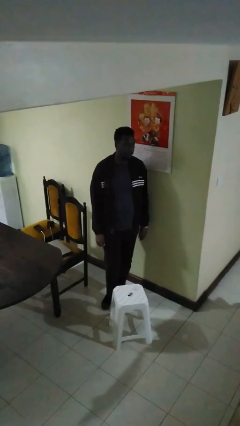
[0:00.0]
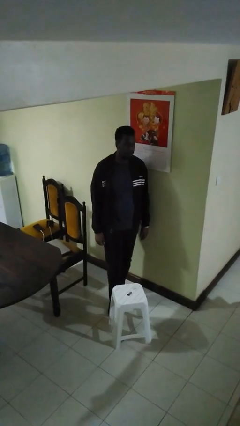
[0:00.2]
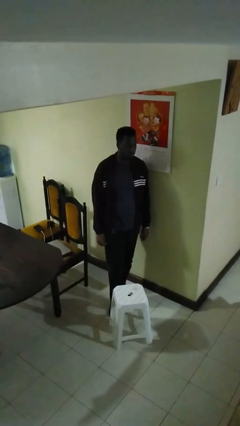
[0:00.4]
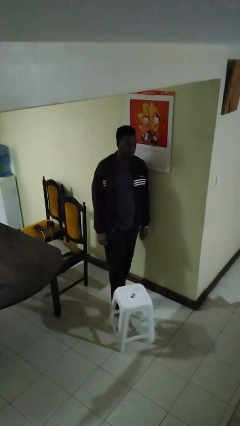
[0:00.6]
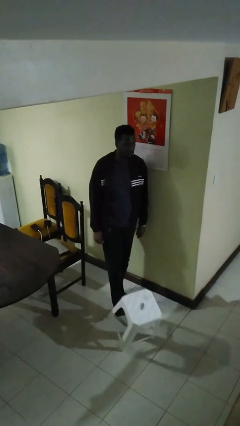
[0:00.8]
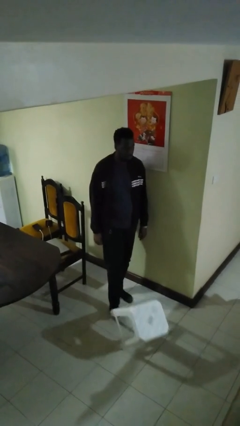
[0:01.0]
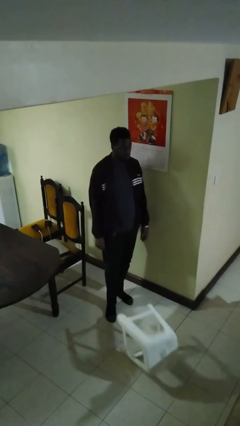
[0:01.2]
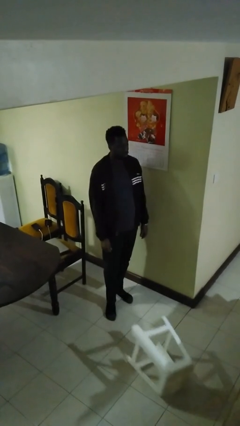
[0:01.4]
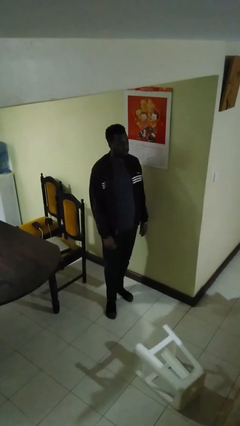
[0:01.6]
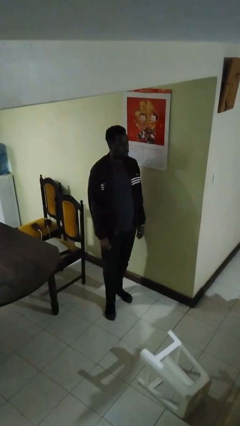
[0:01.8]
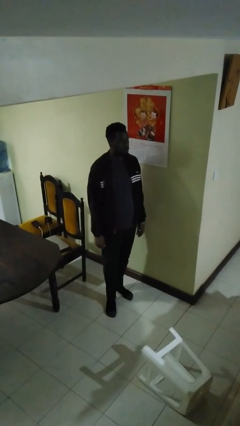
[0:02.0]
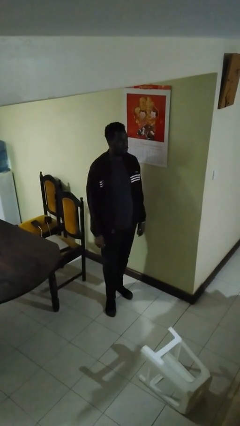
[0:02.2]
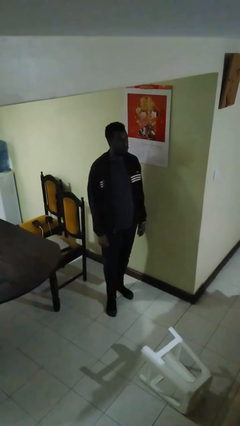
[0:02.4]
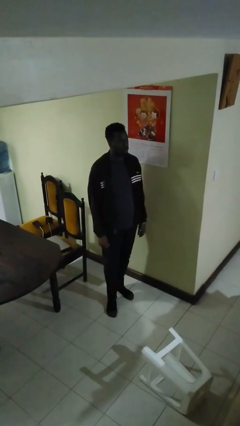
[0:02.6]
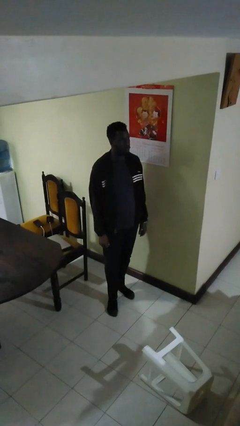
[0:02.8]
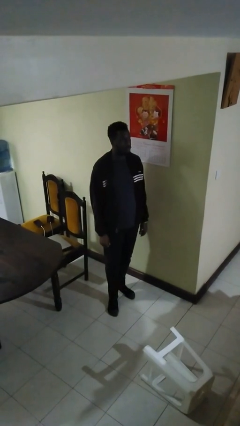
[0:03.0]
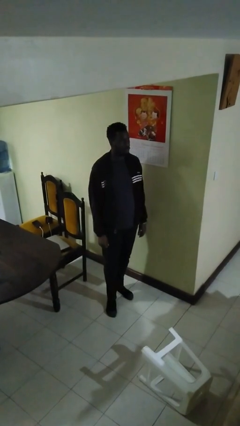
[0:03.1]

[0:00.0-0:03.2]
person knocks over furniture

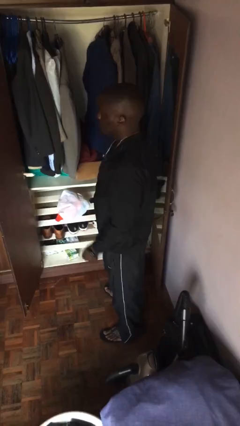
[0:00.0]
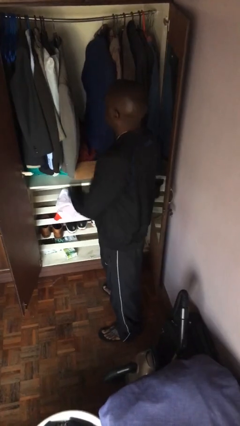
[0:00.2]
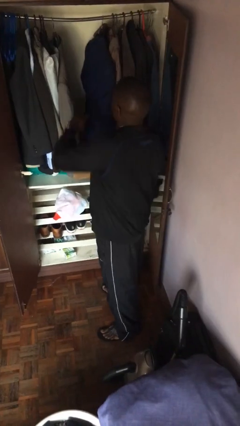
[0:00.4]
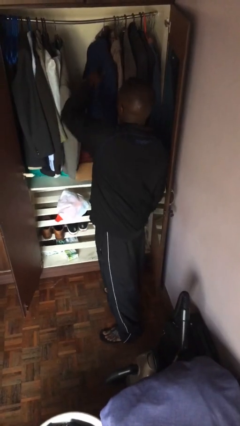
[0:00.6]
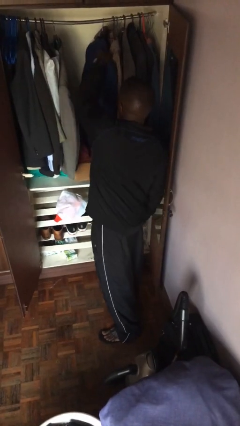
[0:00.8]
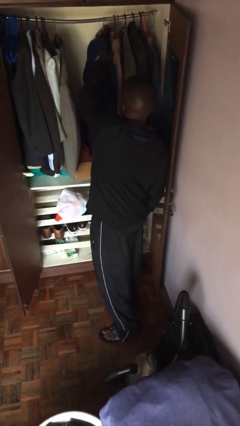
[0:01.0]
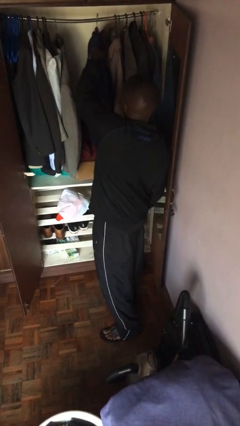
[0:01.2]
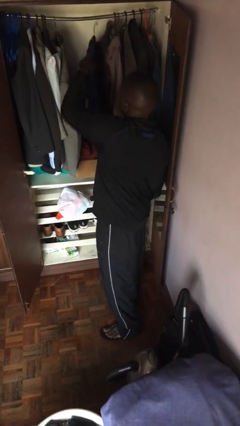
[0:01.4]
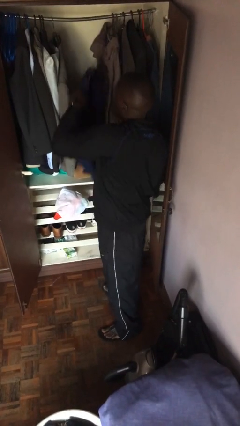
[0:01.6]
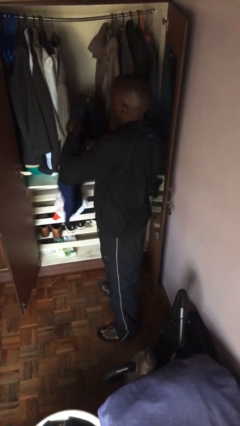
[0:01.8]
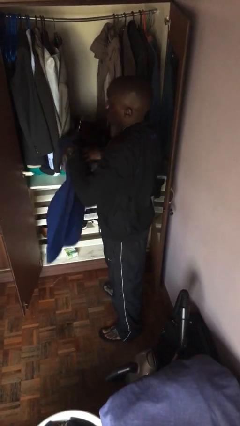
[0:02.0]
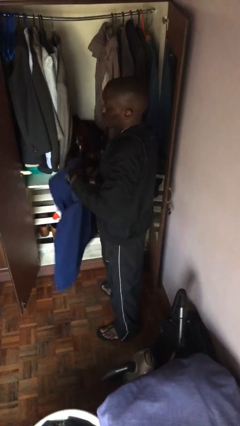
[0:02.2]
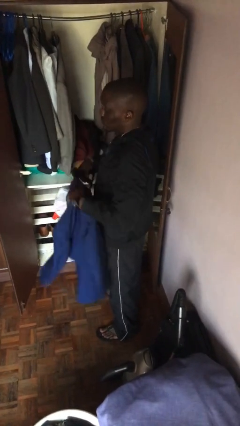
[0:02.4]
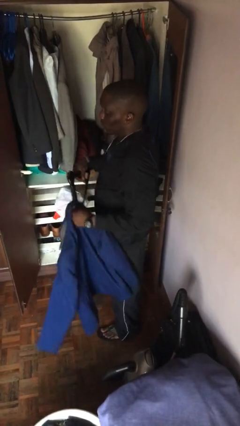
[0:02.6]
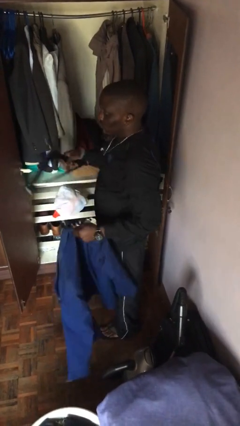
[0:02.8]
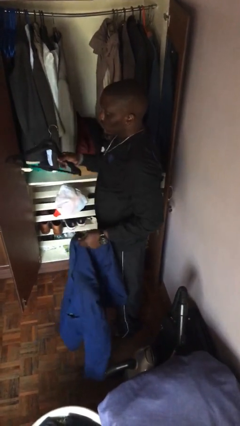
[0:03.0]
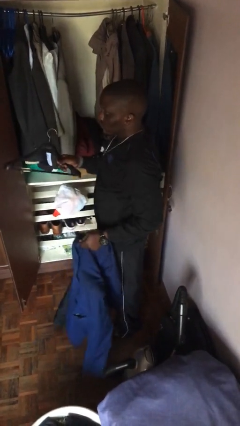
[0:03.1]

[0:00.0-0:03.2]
person takes clothes from closet

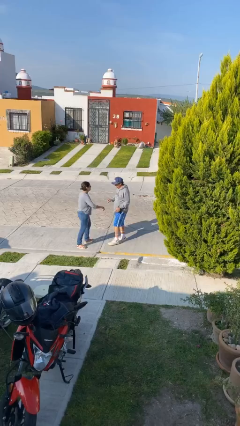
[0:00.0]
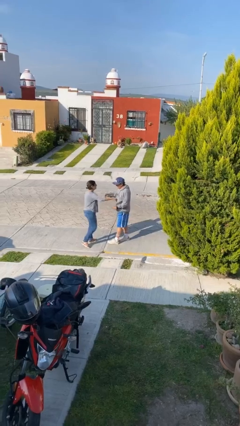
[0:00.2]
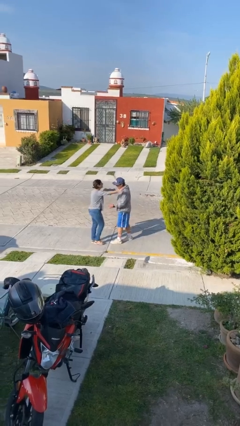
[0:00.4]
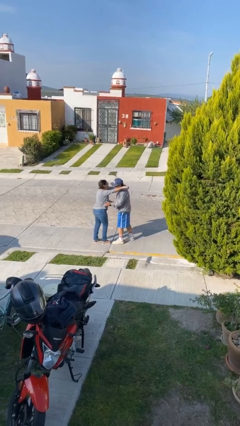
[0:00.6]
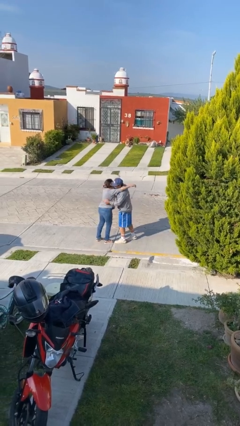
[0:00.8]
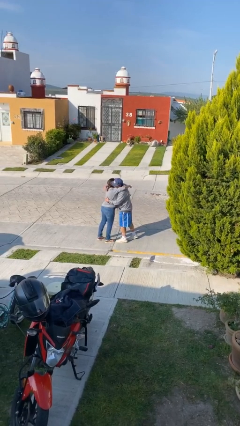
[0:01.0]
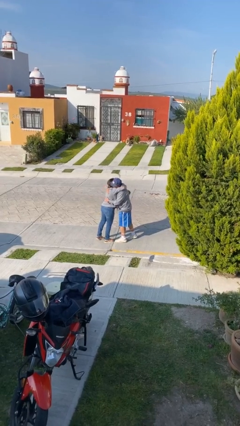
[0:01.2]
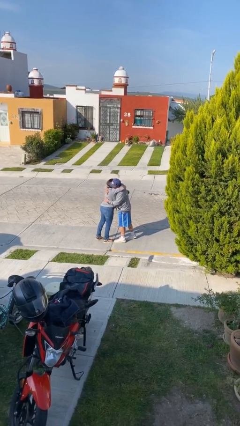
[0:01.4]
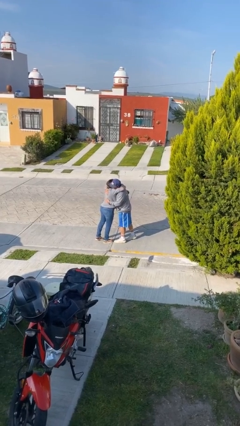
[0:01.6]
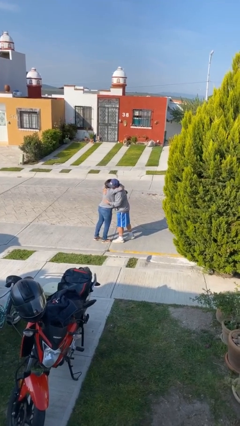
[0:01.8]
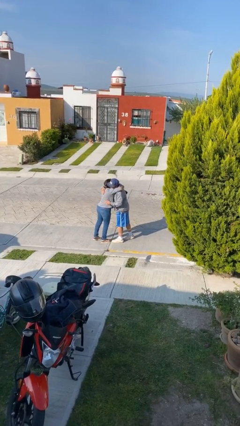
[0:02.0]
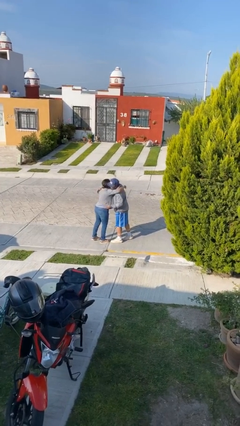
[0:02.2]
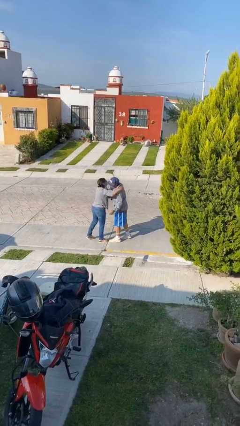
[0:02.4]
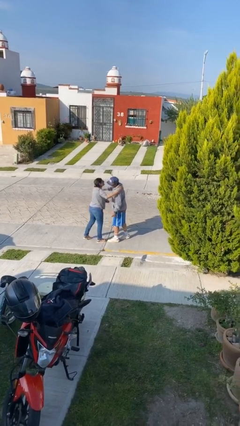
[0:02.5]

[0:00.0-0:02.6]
person embraces person

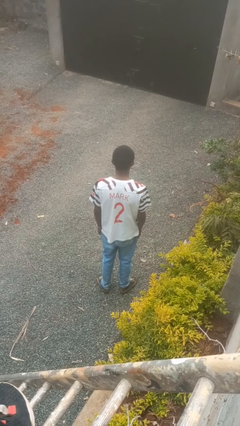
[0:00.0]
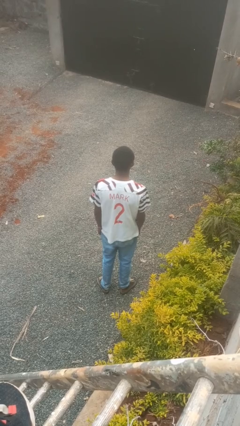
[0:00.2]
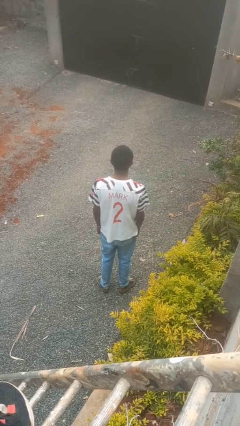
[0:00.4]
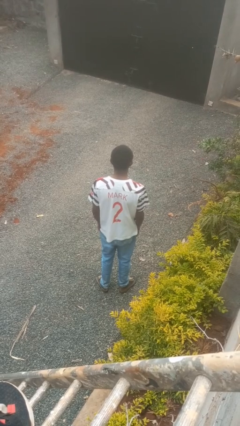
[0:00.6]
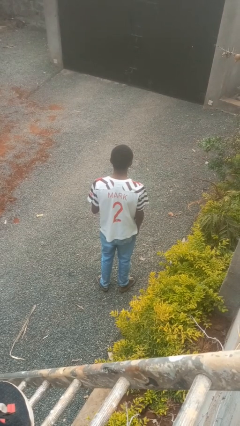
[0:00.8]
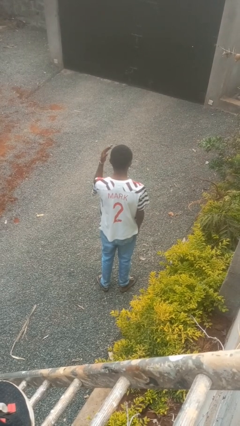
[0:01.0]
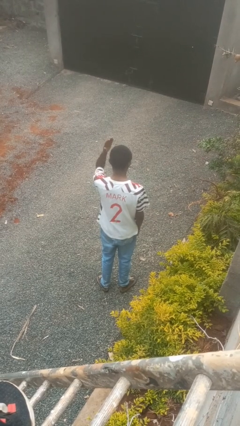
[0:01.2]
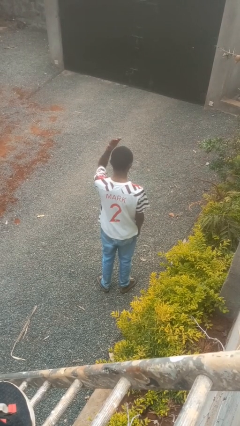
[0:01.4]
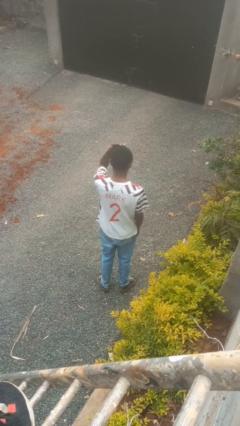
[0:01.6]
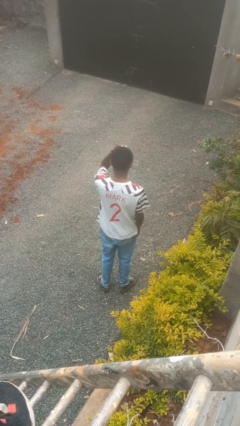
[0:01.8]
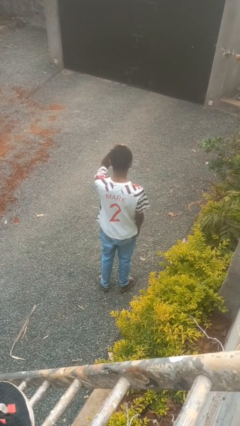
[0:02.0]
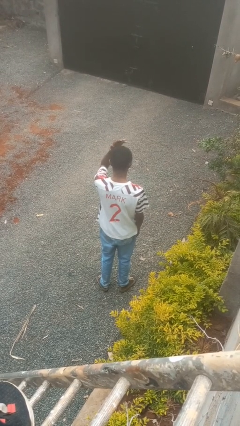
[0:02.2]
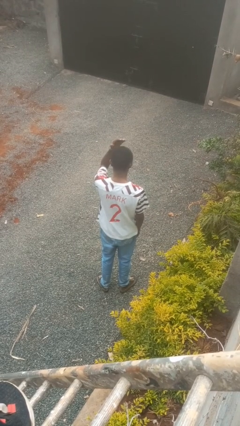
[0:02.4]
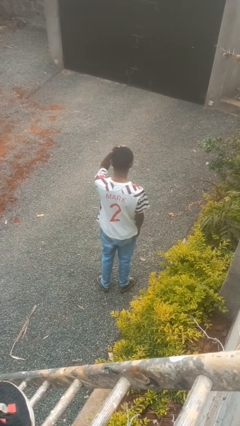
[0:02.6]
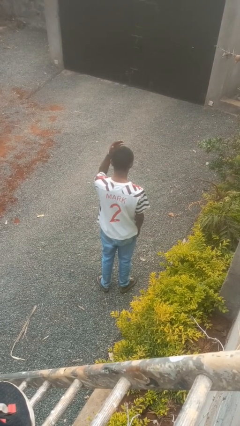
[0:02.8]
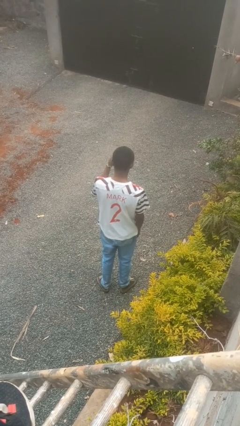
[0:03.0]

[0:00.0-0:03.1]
person pats head

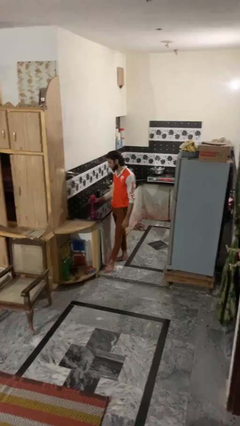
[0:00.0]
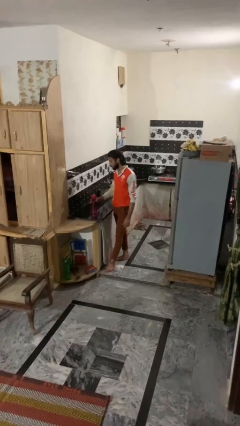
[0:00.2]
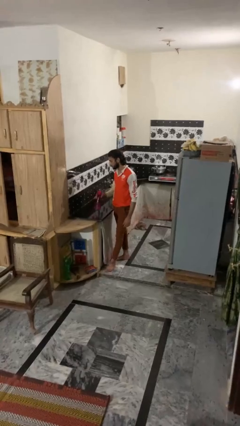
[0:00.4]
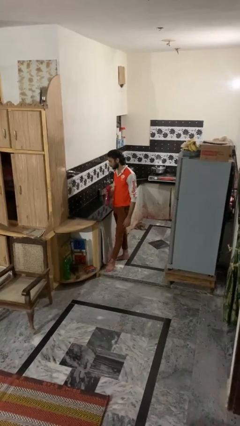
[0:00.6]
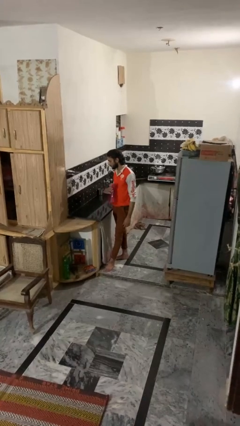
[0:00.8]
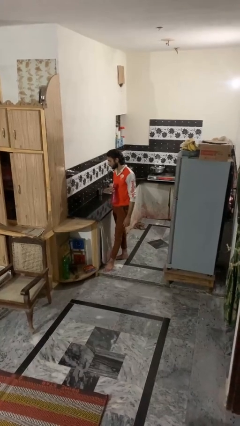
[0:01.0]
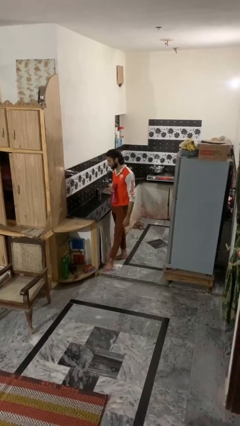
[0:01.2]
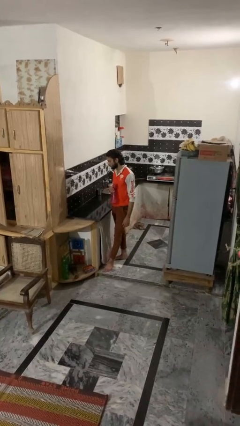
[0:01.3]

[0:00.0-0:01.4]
person picks up object from countertop

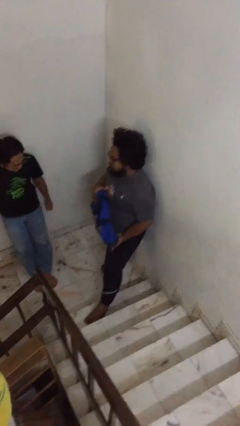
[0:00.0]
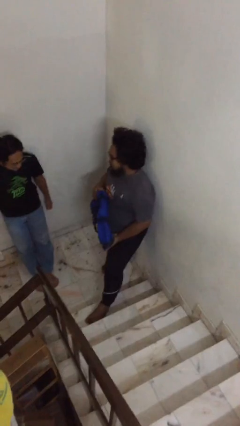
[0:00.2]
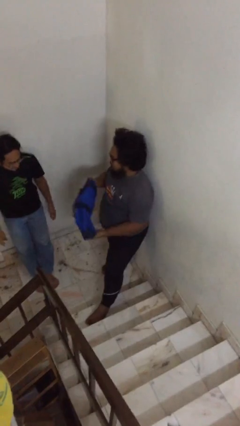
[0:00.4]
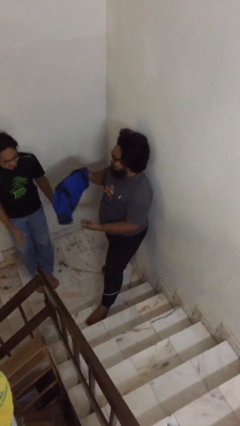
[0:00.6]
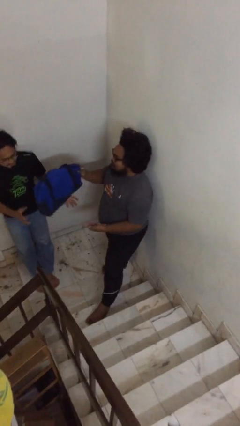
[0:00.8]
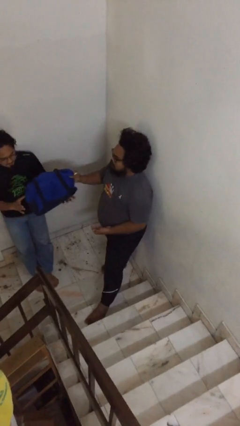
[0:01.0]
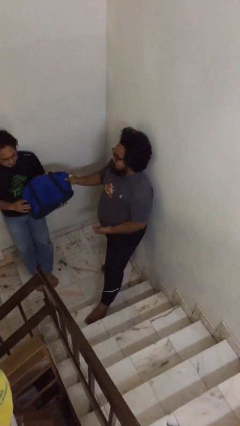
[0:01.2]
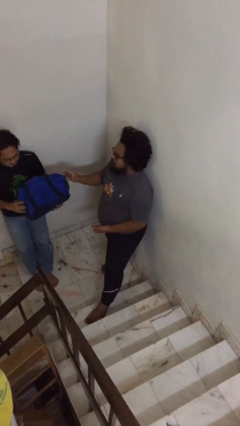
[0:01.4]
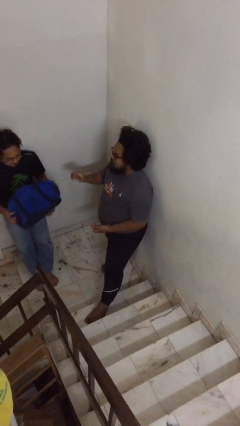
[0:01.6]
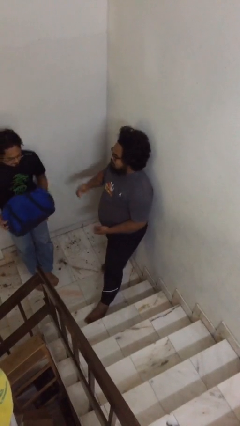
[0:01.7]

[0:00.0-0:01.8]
person transfers object to person

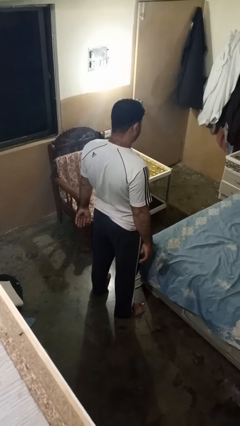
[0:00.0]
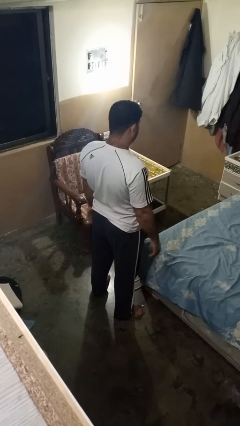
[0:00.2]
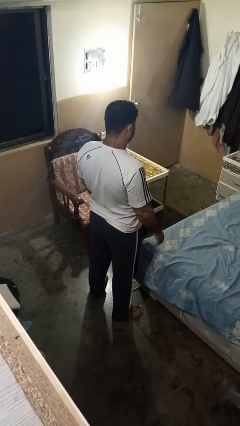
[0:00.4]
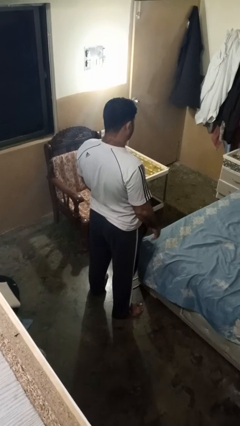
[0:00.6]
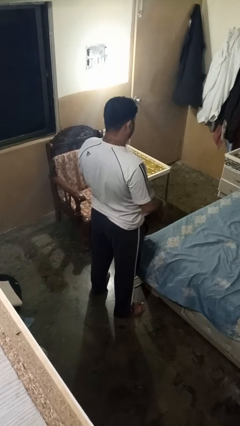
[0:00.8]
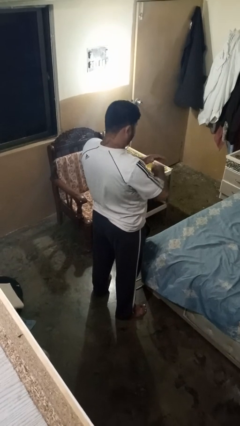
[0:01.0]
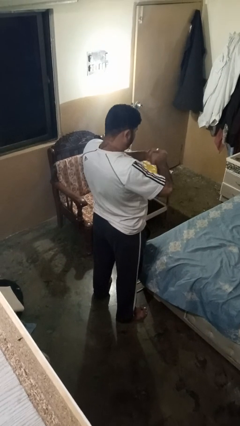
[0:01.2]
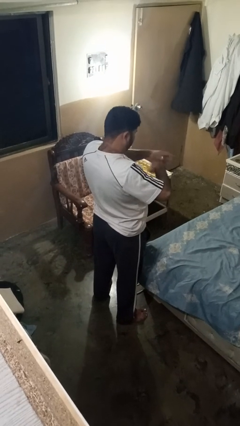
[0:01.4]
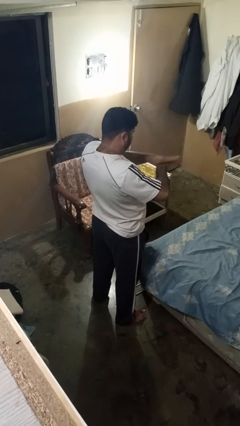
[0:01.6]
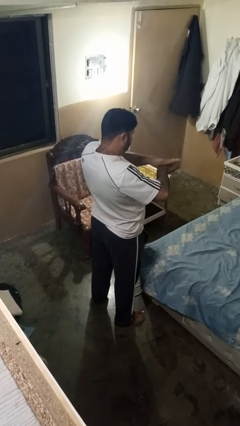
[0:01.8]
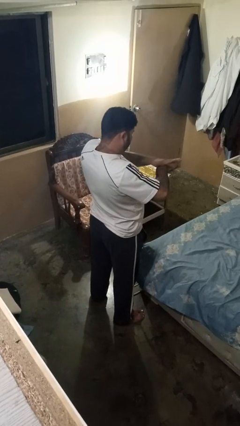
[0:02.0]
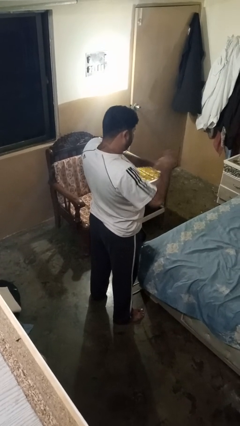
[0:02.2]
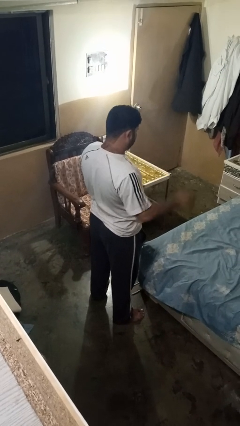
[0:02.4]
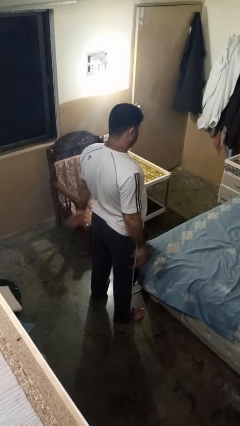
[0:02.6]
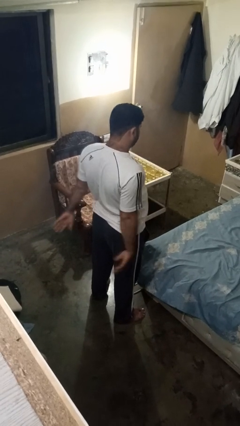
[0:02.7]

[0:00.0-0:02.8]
person swats bug
